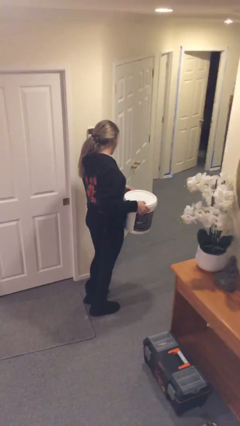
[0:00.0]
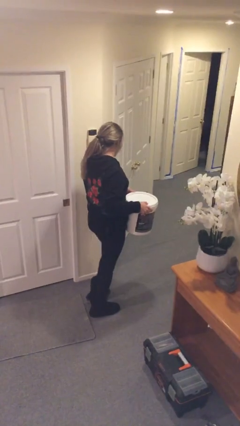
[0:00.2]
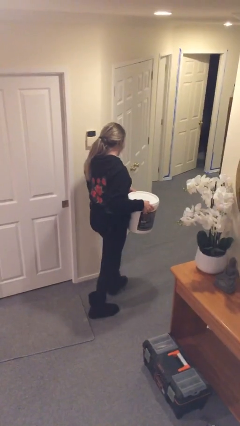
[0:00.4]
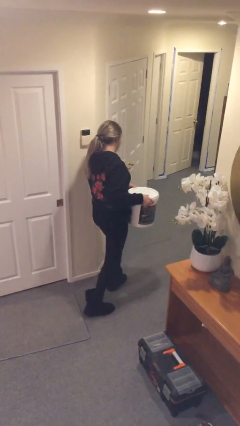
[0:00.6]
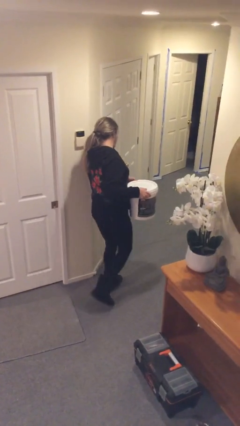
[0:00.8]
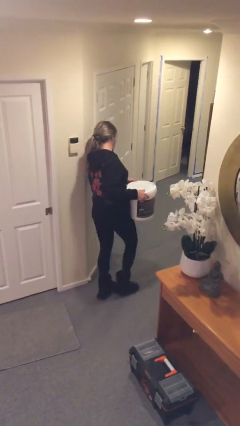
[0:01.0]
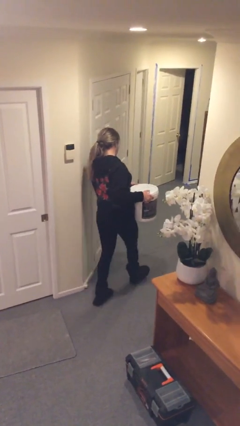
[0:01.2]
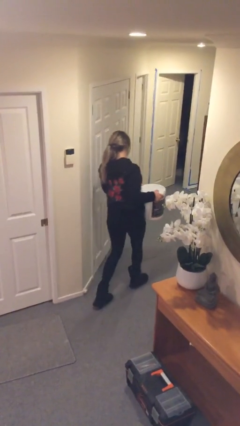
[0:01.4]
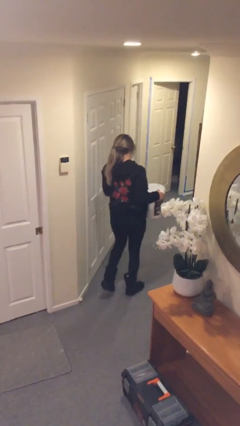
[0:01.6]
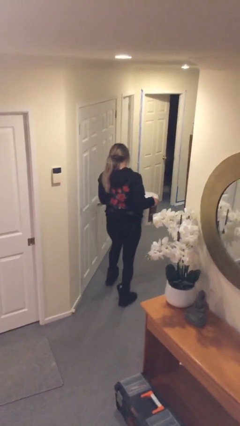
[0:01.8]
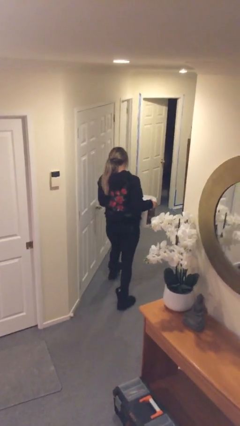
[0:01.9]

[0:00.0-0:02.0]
person carries heavy object

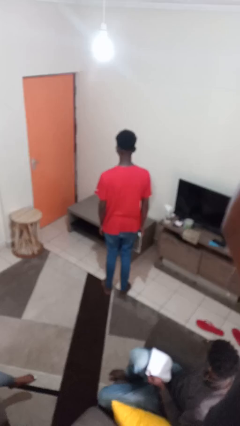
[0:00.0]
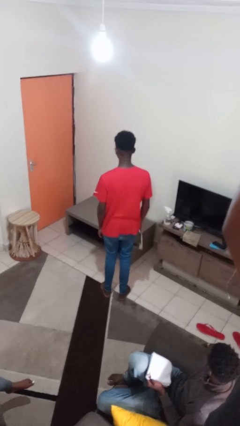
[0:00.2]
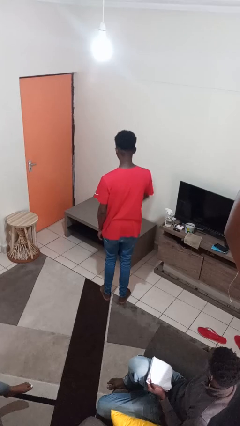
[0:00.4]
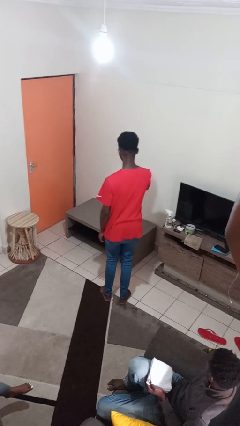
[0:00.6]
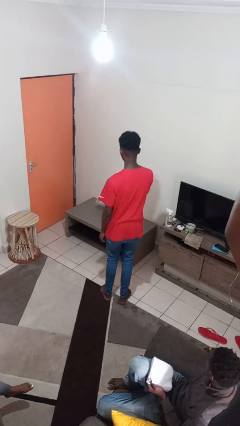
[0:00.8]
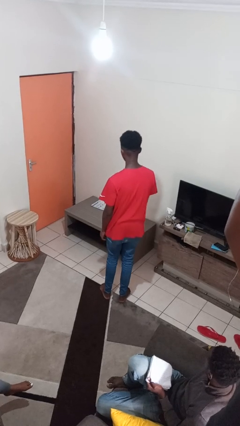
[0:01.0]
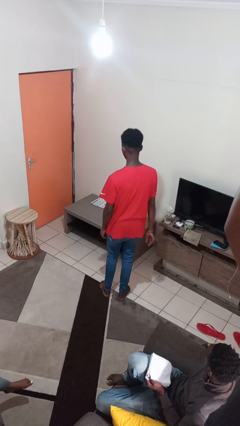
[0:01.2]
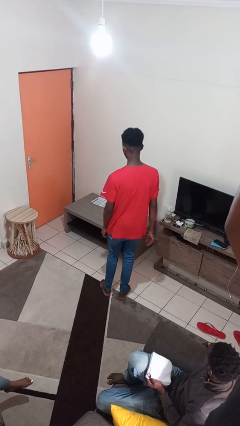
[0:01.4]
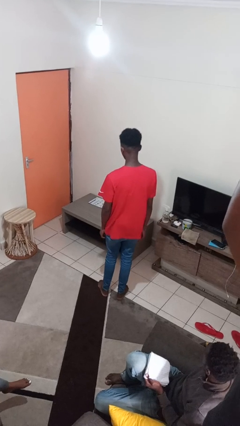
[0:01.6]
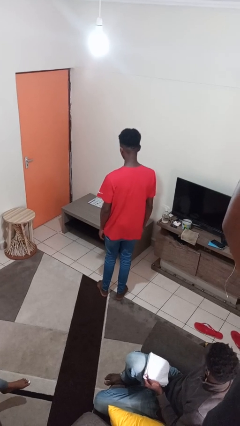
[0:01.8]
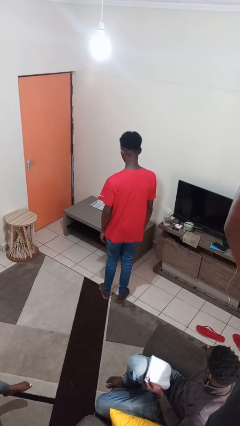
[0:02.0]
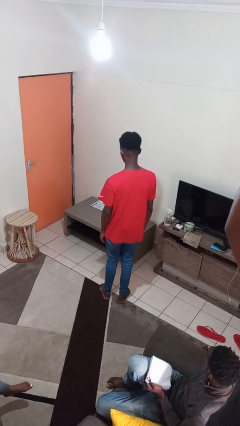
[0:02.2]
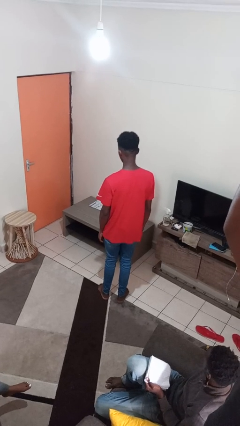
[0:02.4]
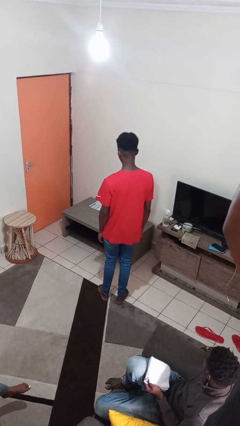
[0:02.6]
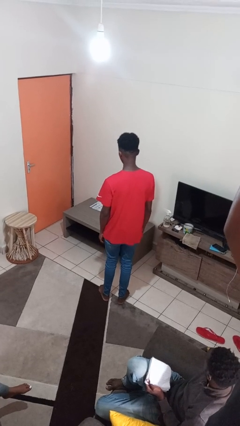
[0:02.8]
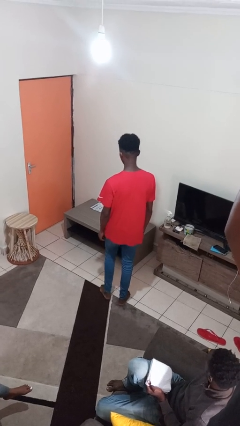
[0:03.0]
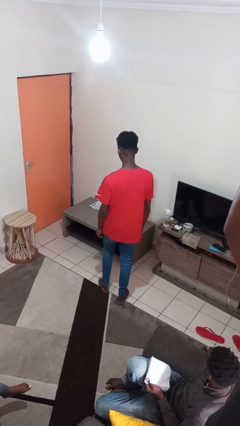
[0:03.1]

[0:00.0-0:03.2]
person throws object on table

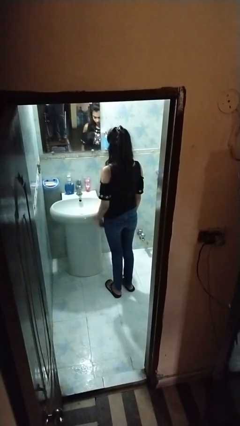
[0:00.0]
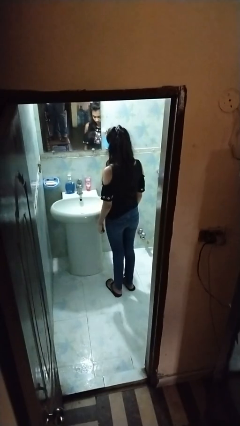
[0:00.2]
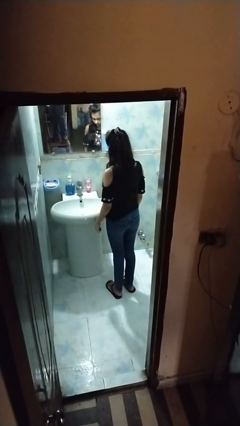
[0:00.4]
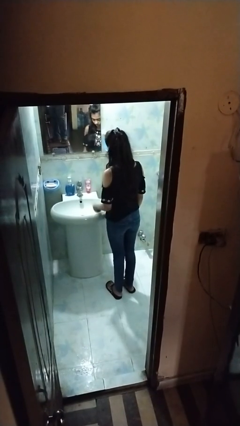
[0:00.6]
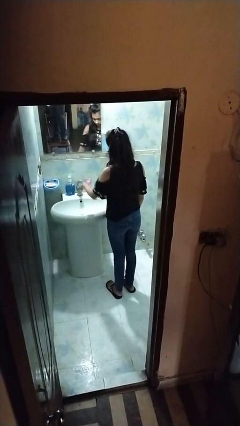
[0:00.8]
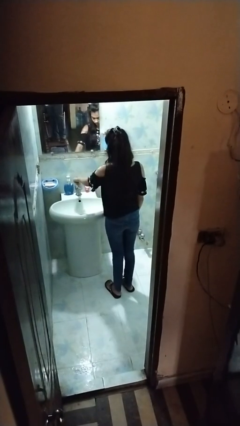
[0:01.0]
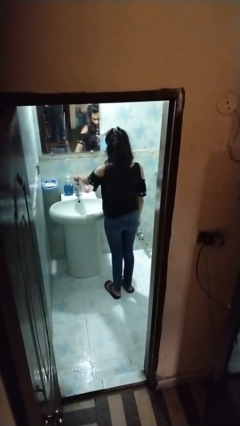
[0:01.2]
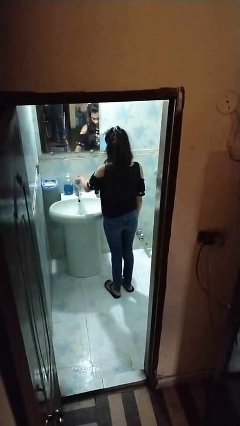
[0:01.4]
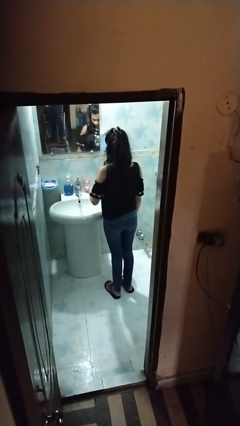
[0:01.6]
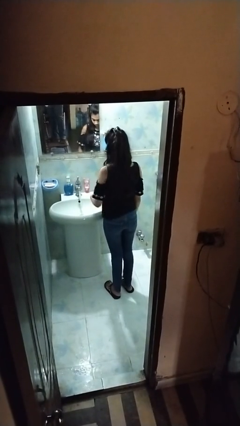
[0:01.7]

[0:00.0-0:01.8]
person turns on faucet

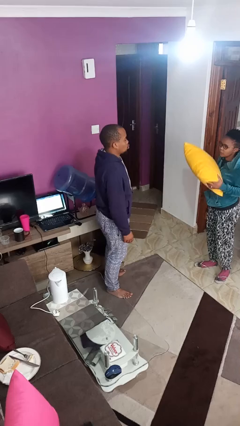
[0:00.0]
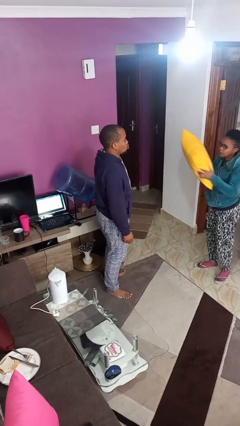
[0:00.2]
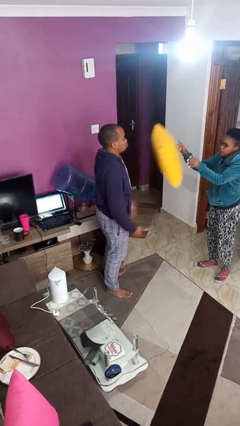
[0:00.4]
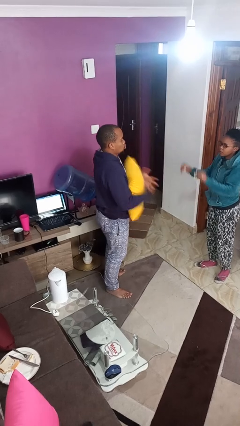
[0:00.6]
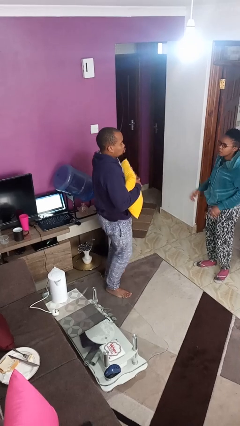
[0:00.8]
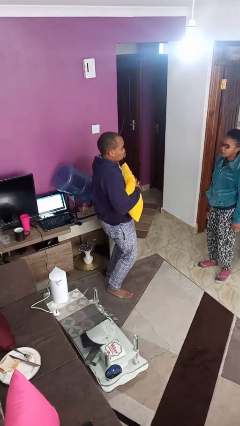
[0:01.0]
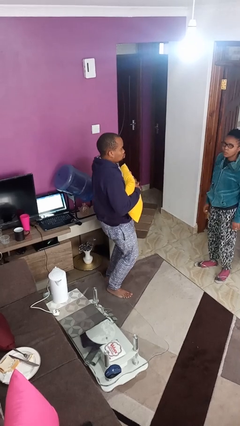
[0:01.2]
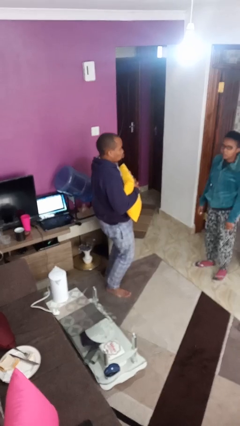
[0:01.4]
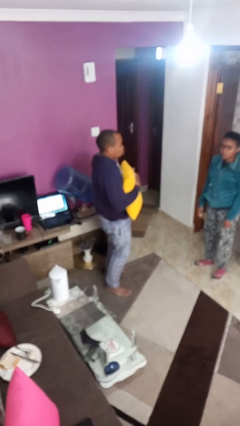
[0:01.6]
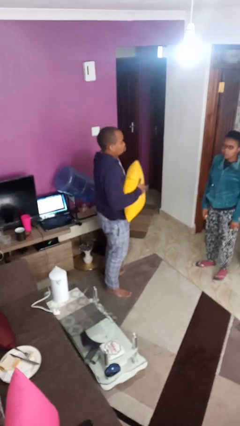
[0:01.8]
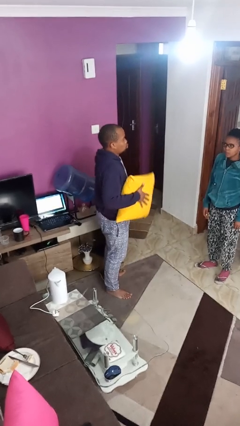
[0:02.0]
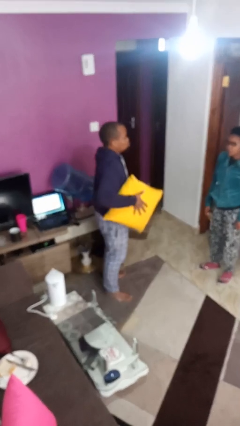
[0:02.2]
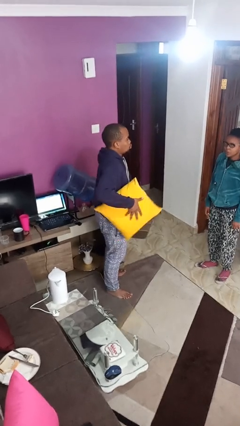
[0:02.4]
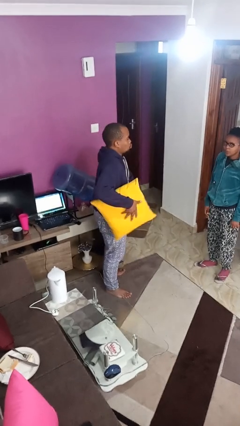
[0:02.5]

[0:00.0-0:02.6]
person catches object from person

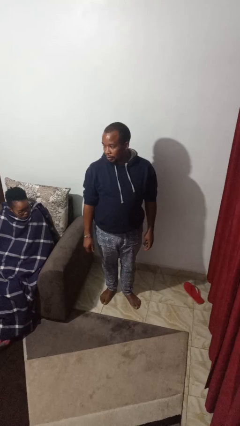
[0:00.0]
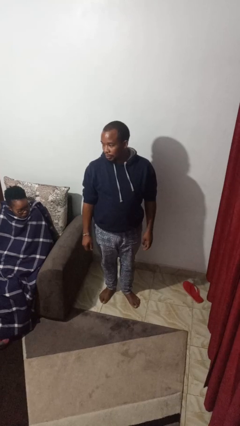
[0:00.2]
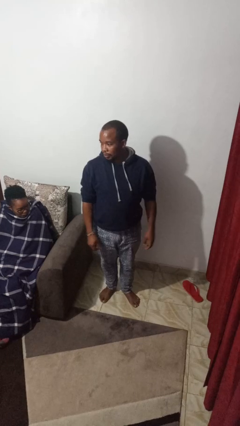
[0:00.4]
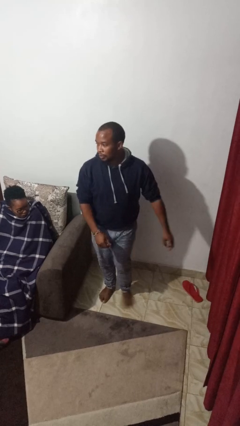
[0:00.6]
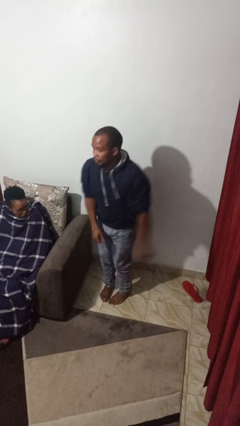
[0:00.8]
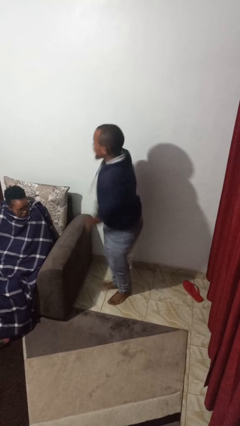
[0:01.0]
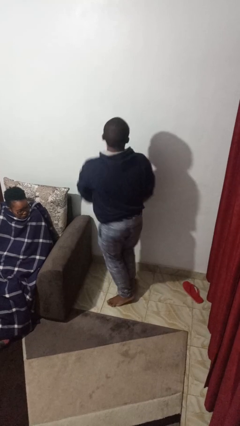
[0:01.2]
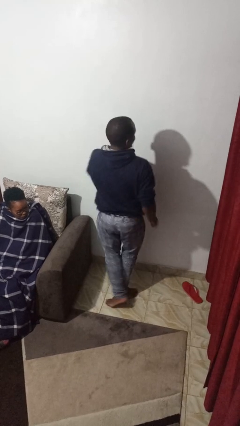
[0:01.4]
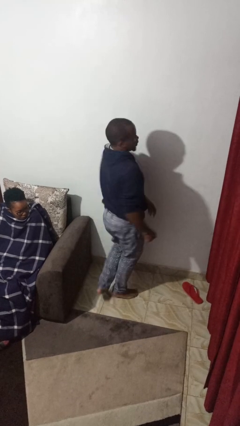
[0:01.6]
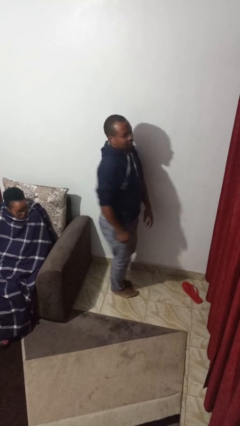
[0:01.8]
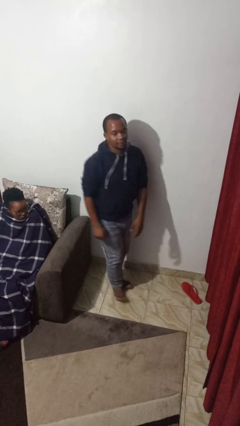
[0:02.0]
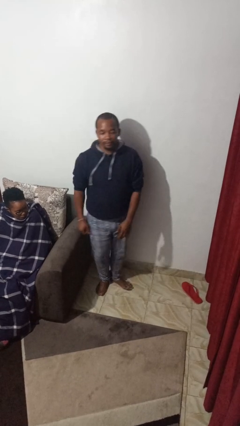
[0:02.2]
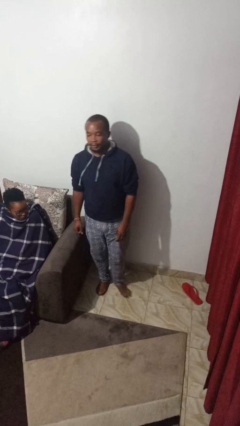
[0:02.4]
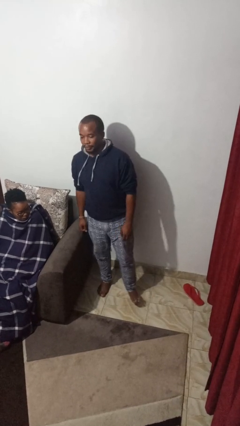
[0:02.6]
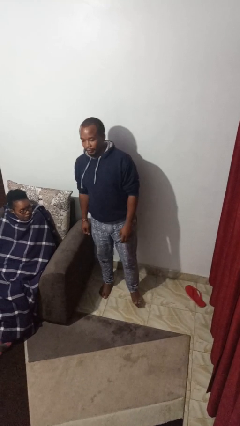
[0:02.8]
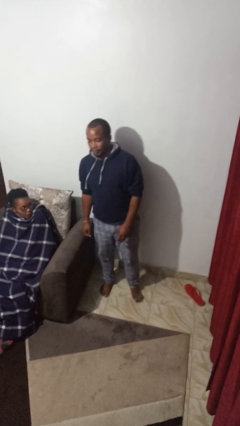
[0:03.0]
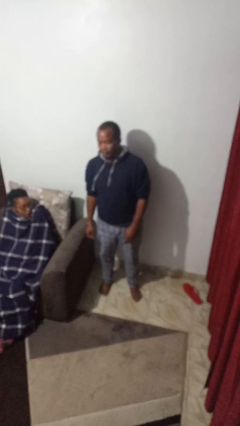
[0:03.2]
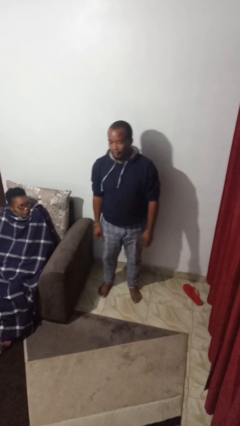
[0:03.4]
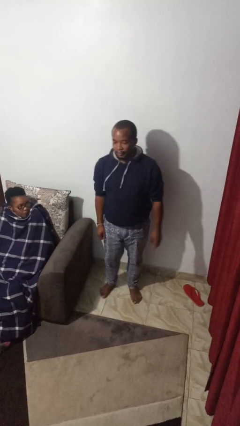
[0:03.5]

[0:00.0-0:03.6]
person twirls

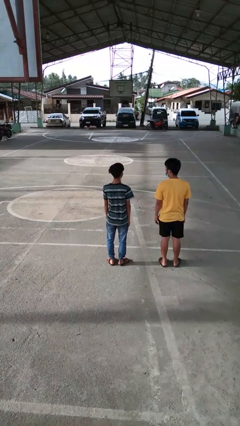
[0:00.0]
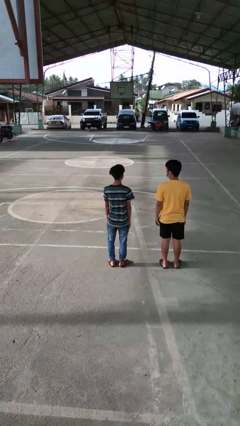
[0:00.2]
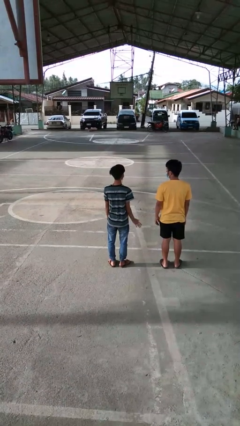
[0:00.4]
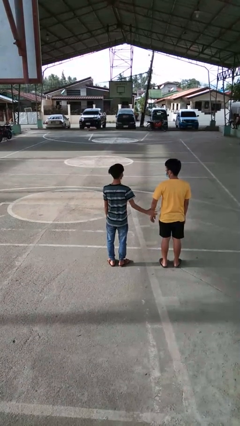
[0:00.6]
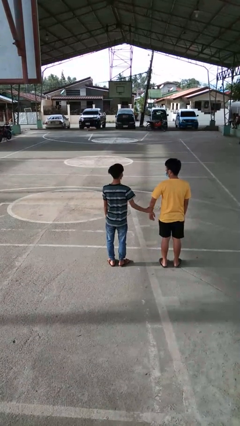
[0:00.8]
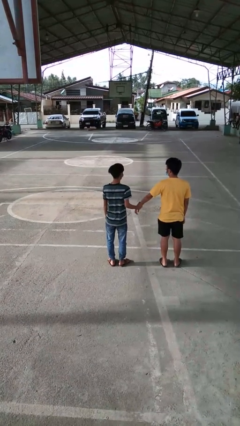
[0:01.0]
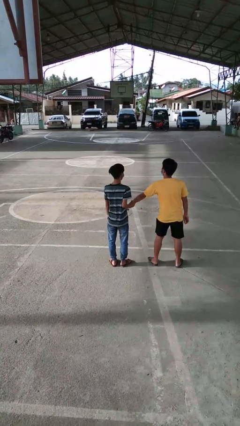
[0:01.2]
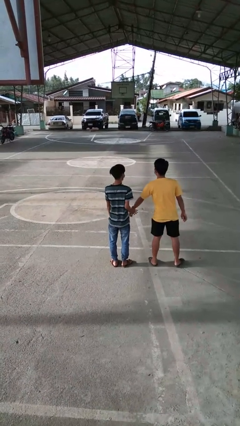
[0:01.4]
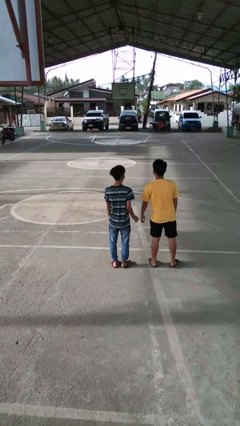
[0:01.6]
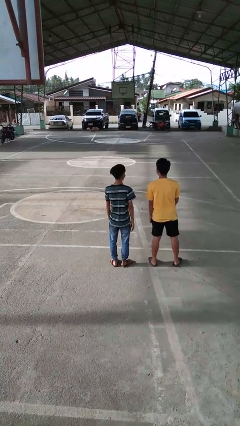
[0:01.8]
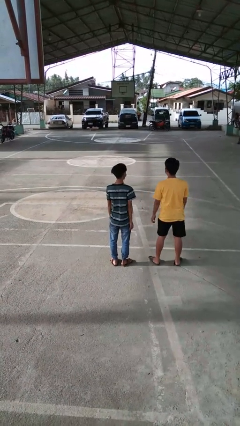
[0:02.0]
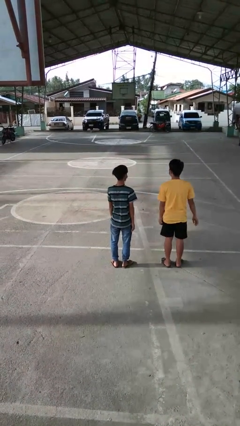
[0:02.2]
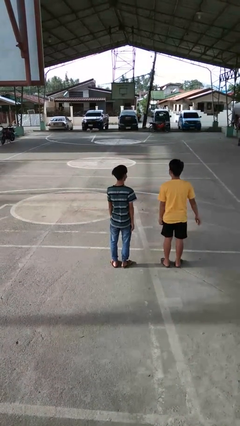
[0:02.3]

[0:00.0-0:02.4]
person grabs person by forearm

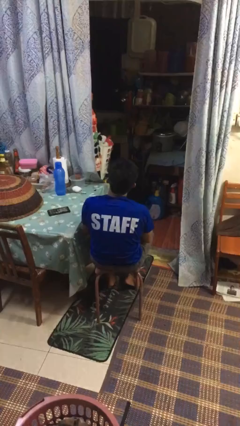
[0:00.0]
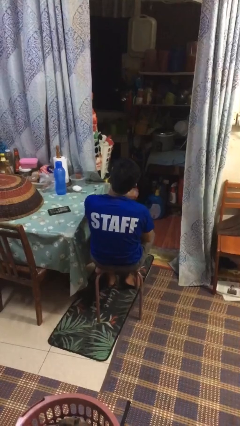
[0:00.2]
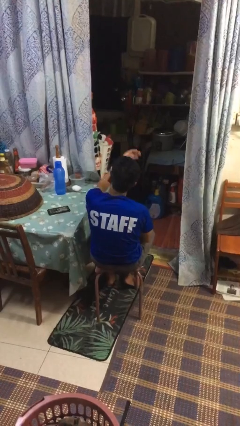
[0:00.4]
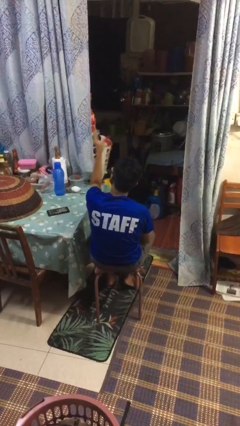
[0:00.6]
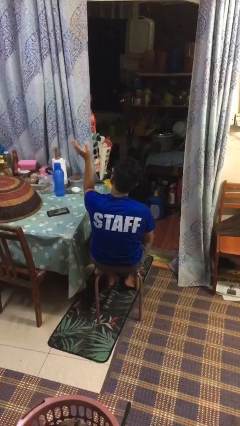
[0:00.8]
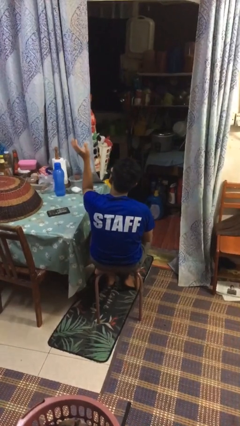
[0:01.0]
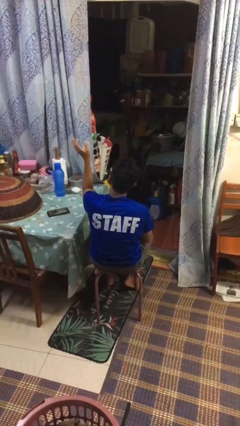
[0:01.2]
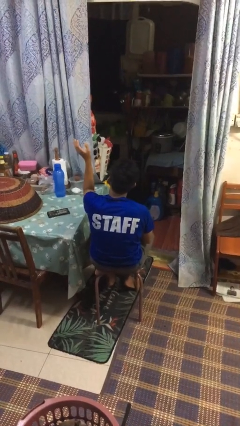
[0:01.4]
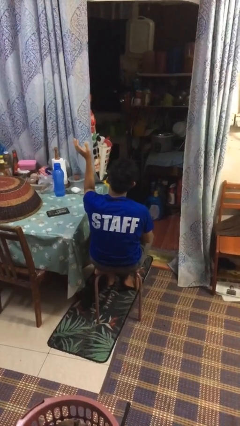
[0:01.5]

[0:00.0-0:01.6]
person gestures swipe left
